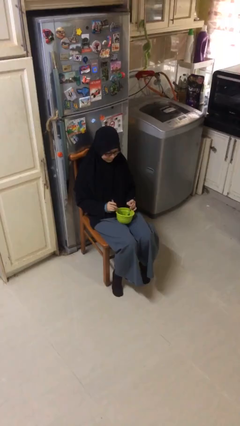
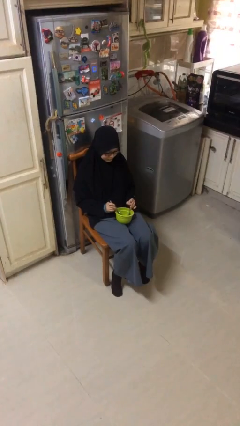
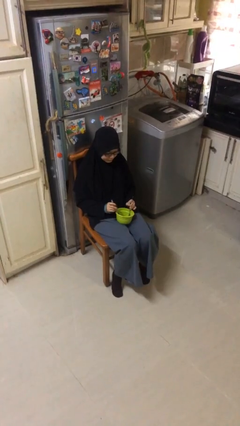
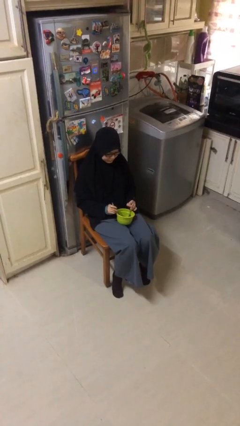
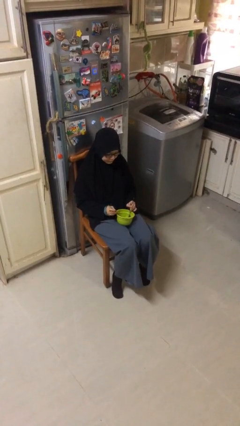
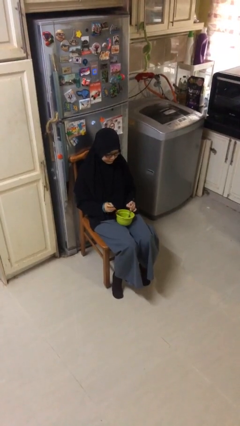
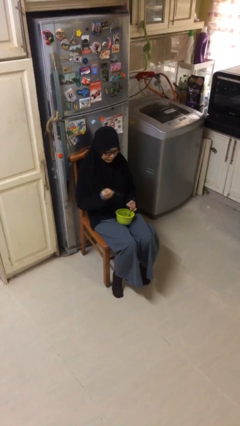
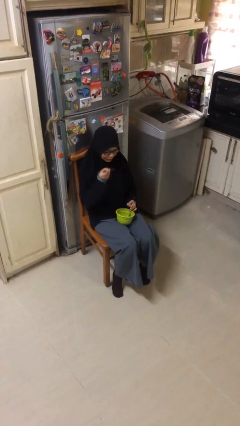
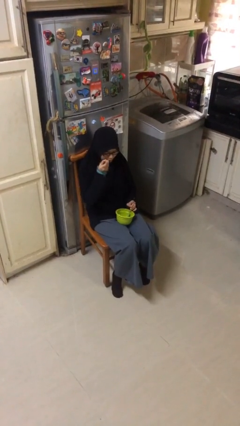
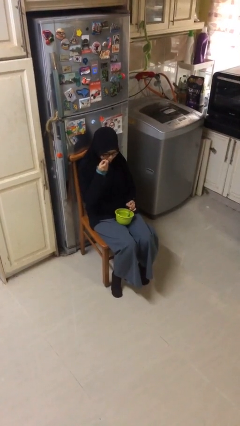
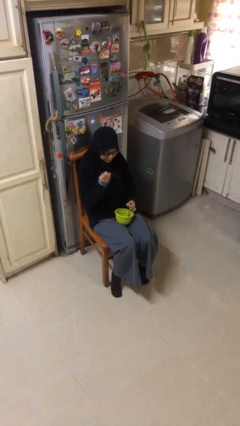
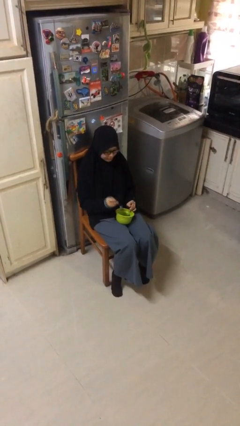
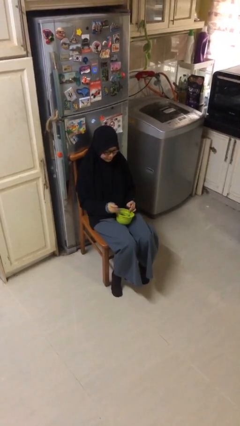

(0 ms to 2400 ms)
person eats with utensil

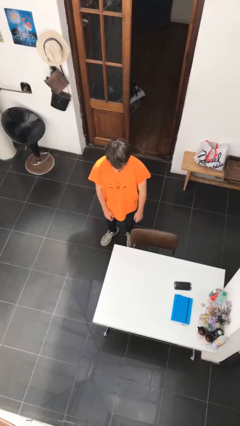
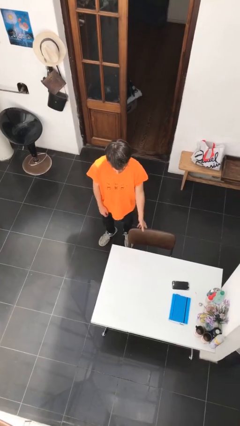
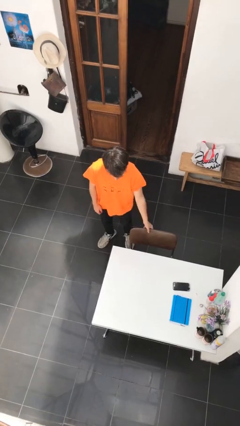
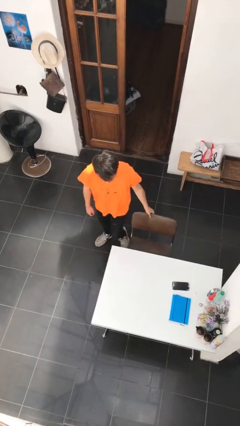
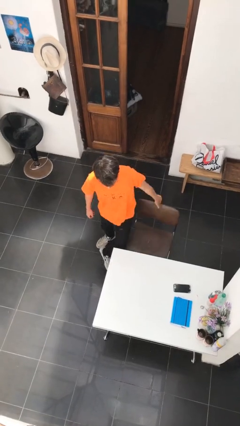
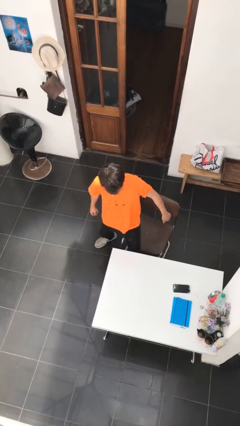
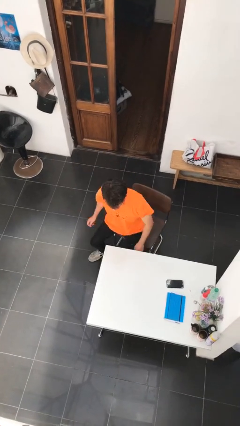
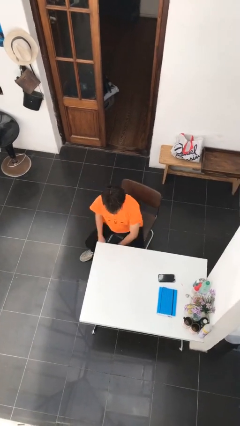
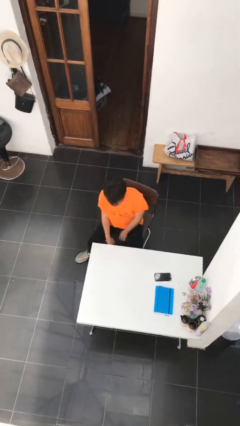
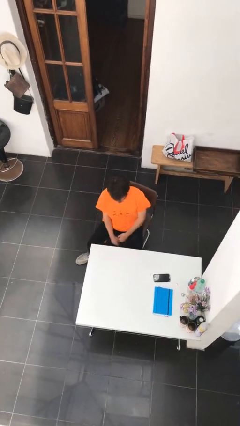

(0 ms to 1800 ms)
person sits down

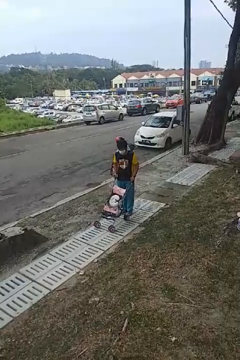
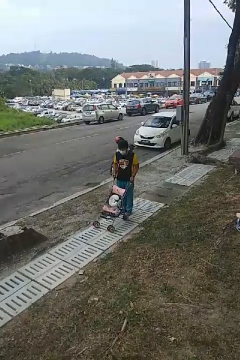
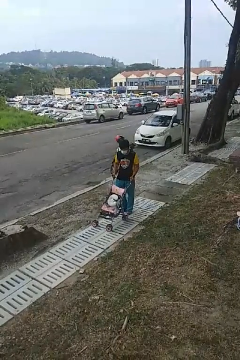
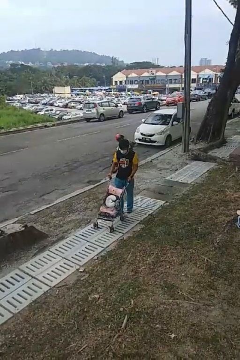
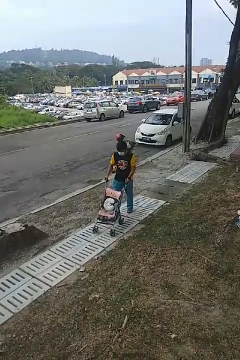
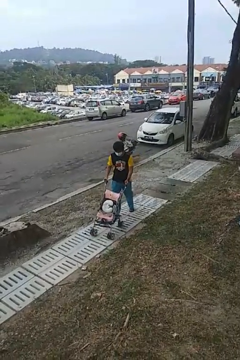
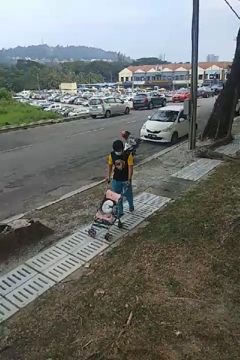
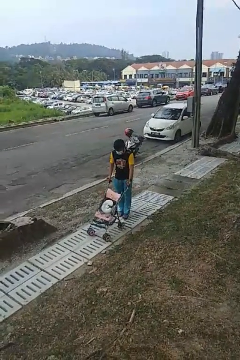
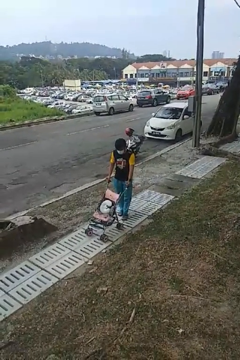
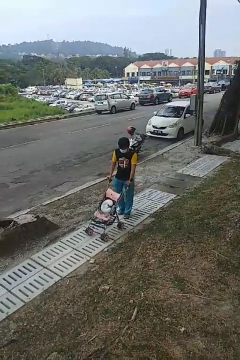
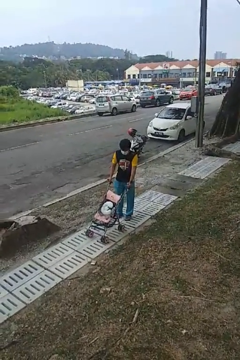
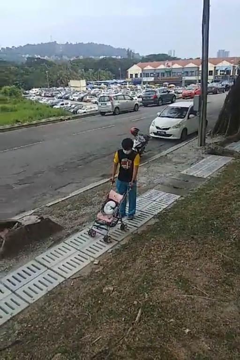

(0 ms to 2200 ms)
person pushes wheeled cart

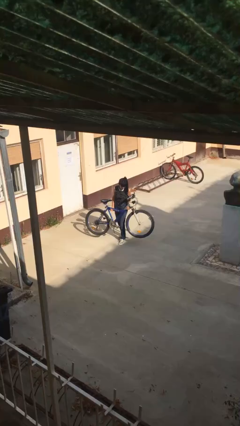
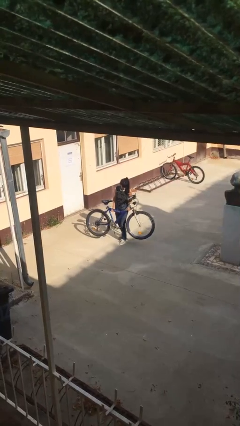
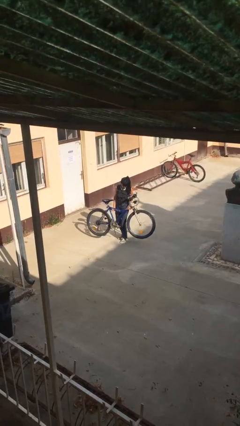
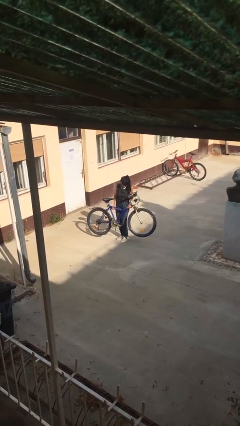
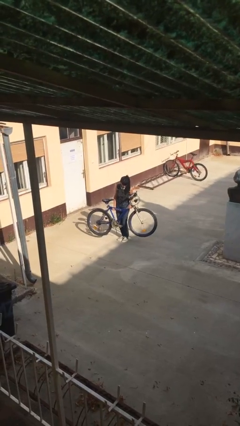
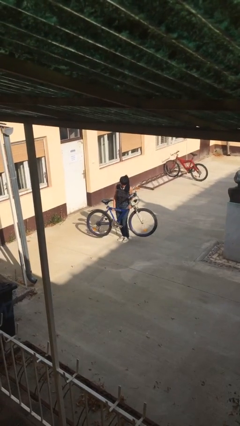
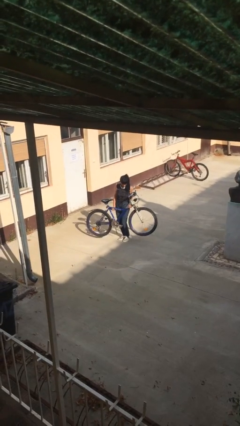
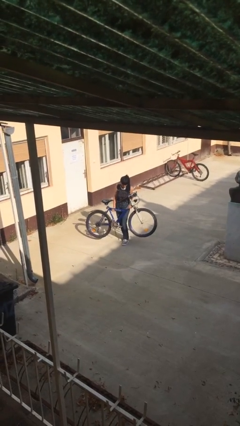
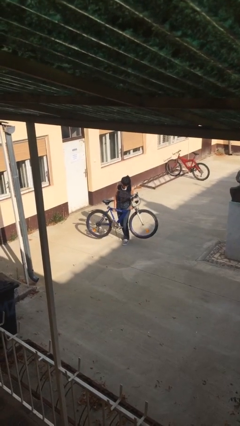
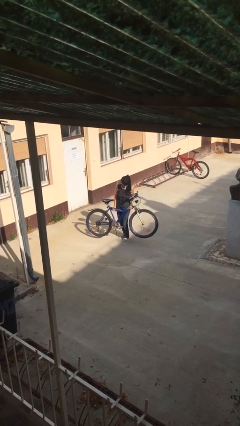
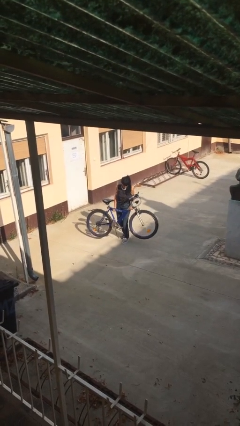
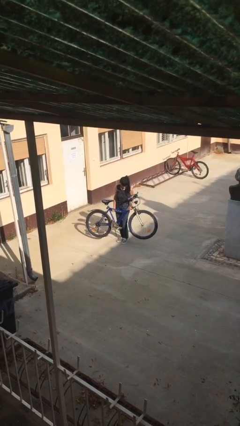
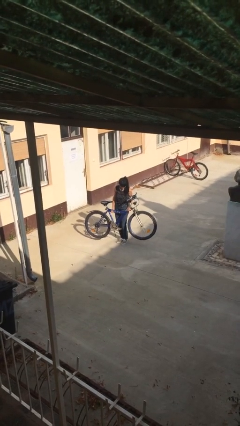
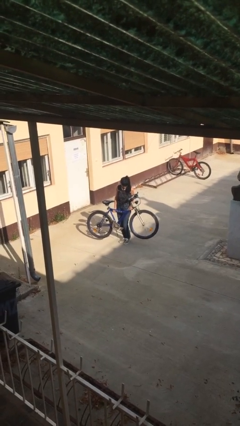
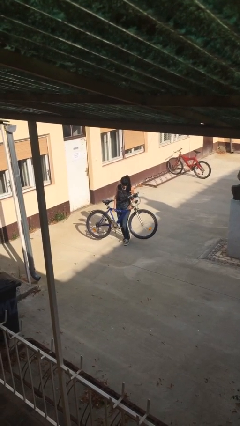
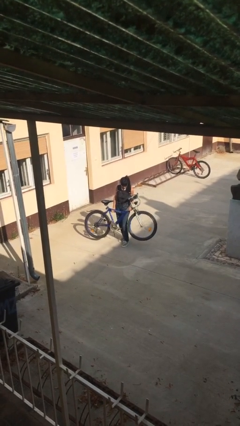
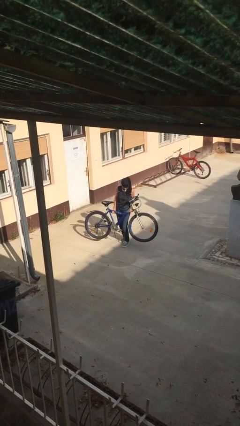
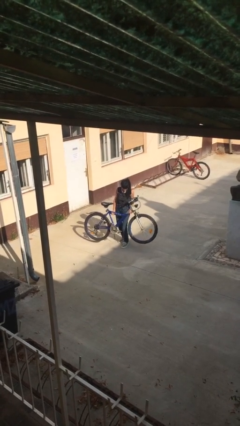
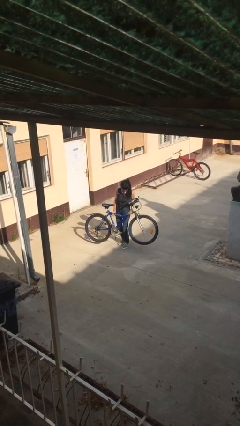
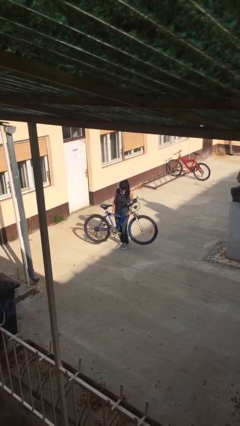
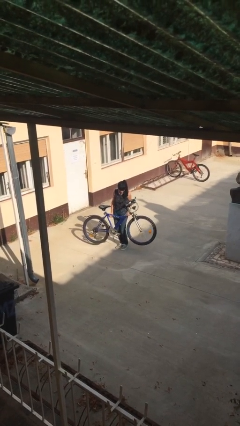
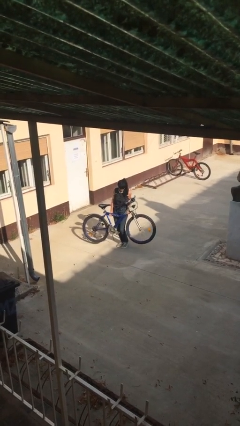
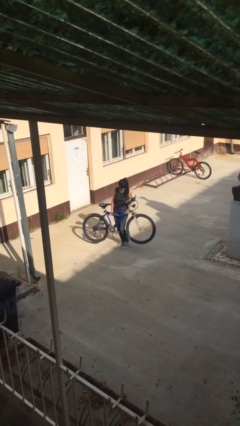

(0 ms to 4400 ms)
person carries heavy object

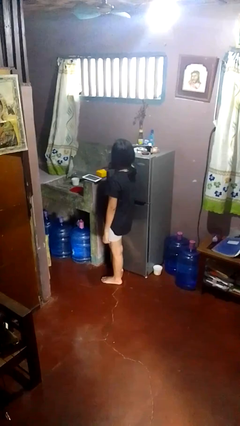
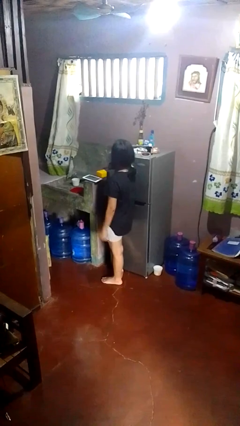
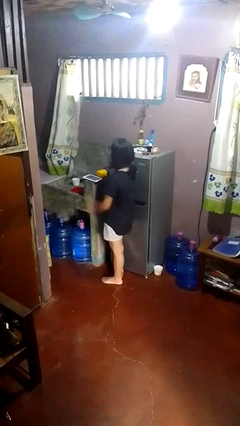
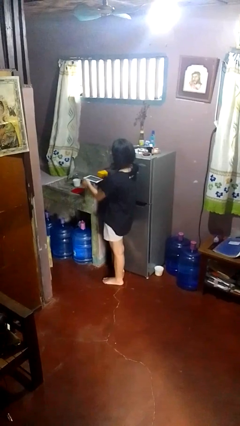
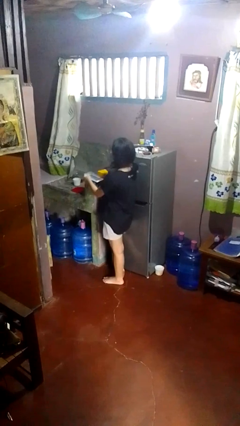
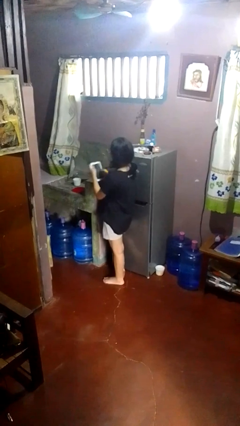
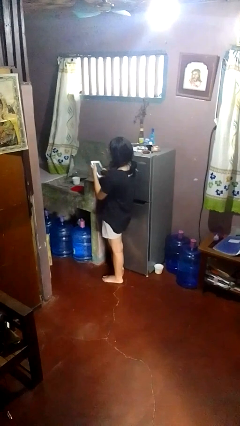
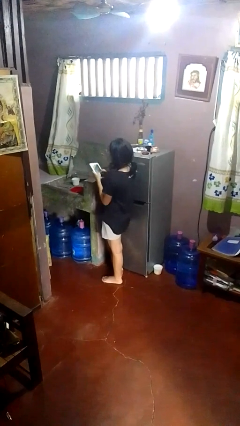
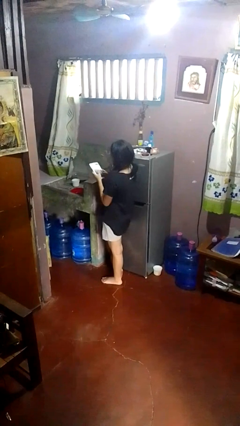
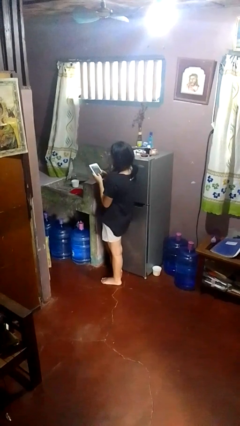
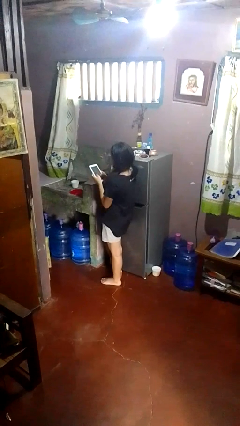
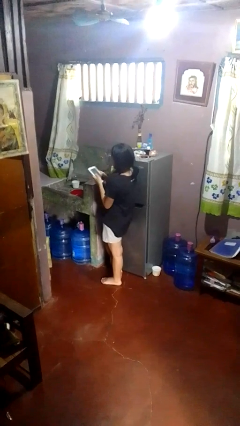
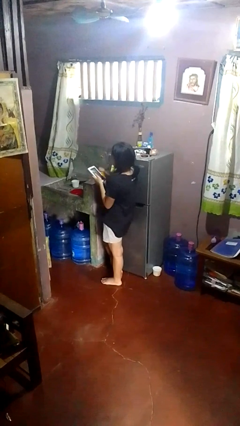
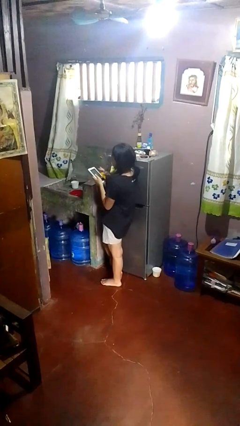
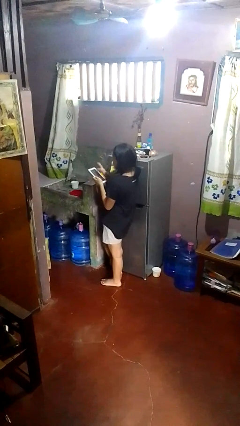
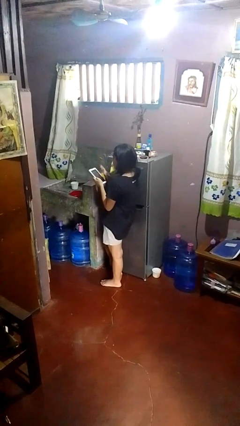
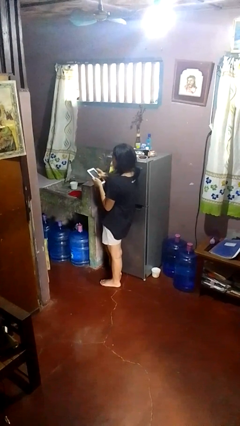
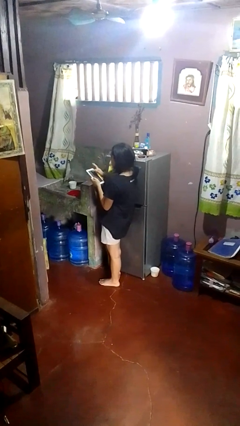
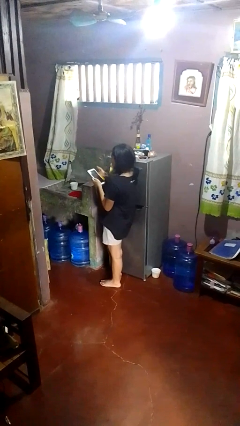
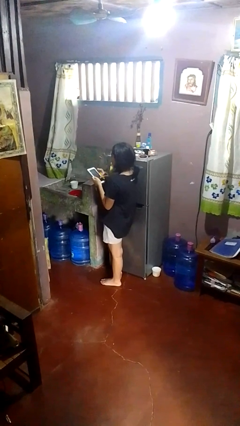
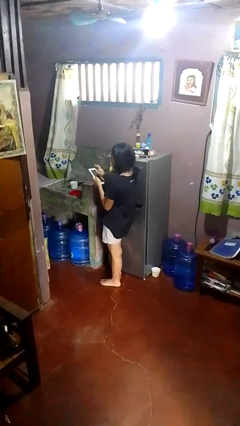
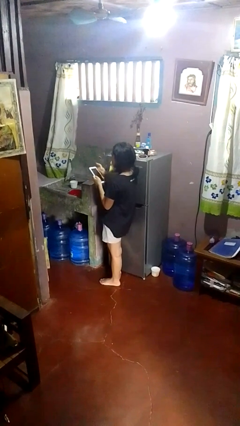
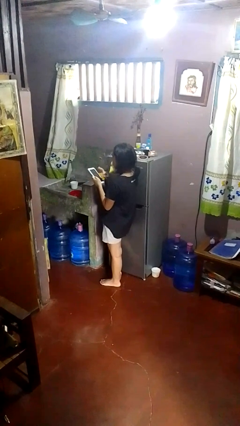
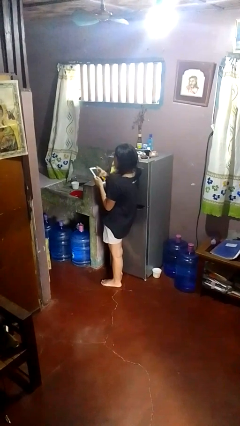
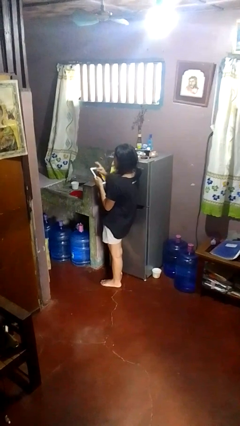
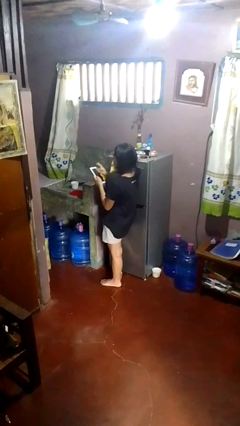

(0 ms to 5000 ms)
person interacts with tablet

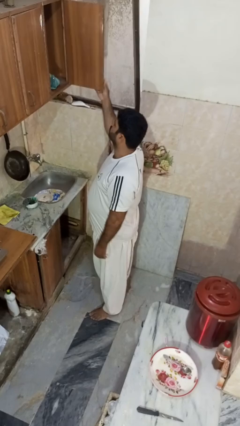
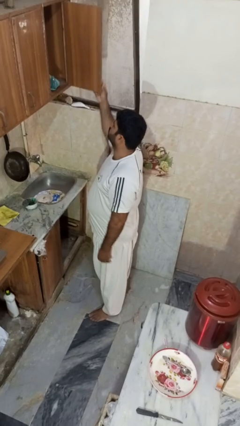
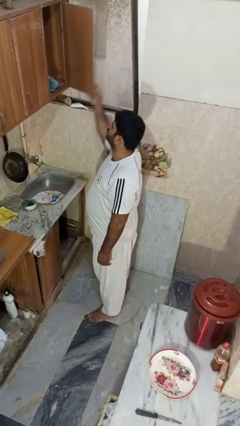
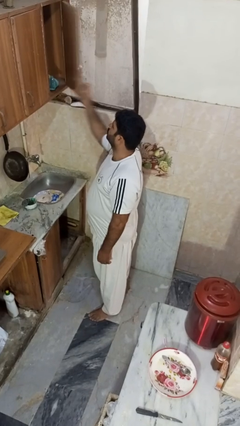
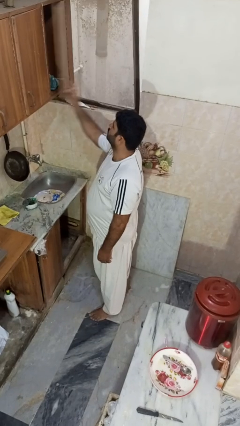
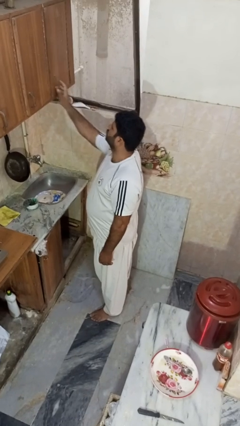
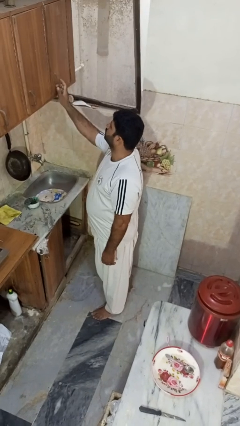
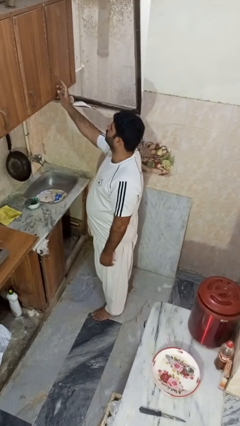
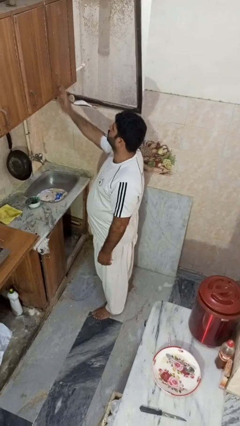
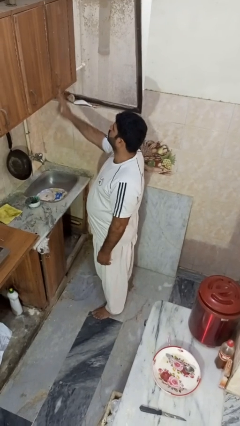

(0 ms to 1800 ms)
person closes cabinet

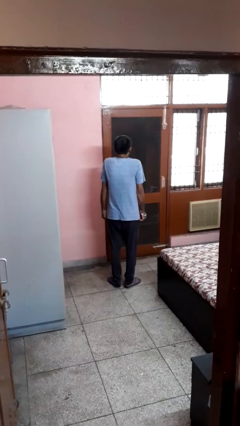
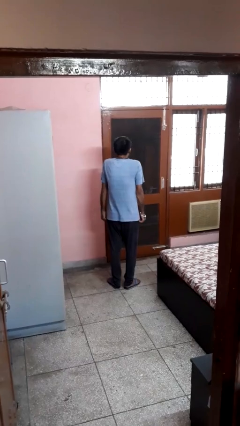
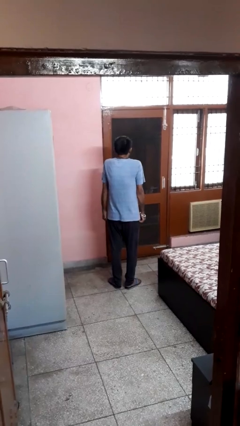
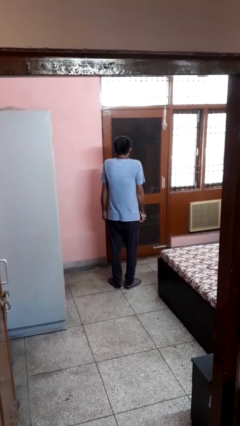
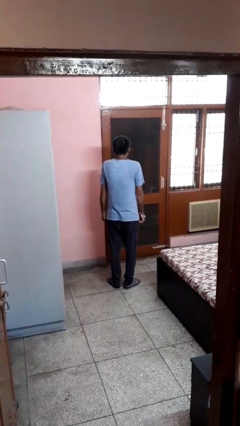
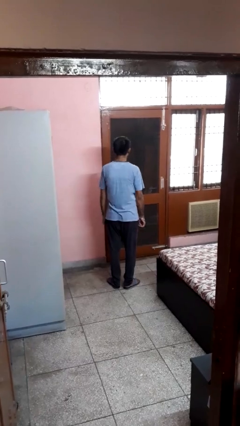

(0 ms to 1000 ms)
person shrugs
